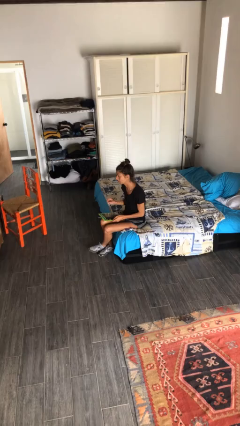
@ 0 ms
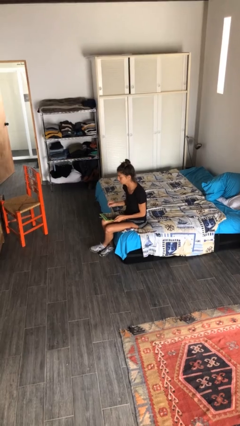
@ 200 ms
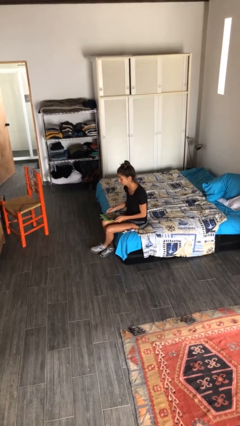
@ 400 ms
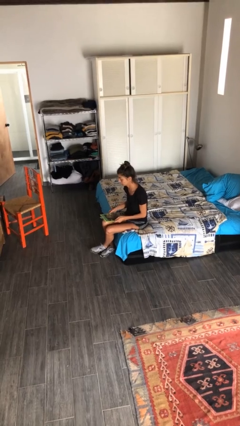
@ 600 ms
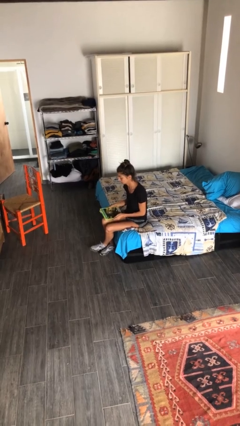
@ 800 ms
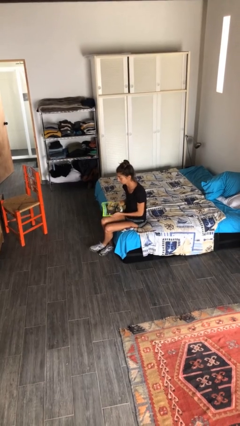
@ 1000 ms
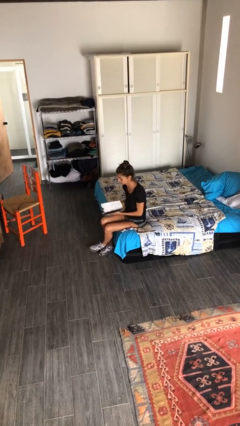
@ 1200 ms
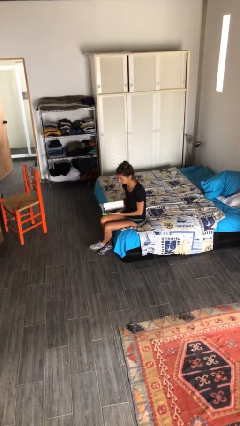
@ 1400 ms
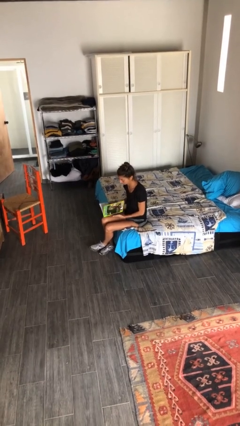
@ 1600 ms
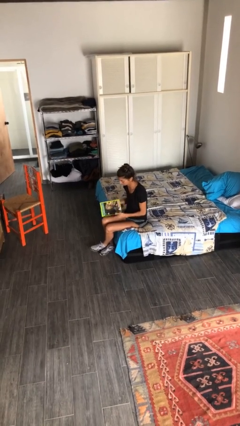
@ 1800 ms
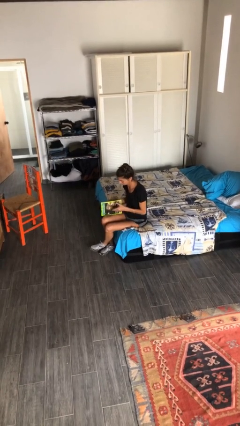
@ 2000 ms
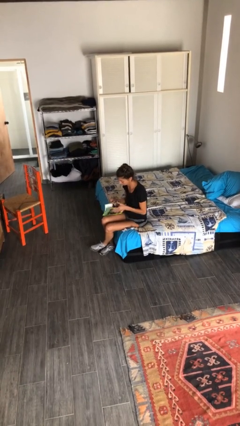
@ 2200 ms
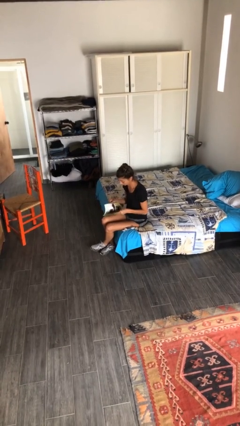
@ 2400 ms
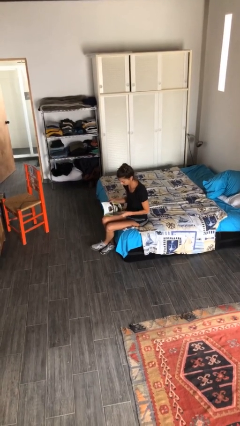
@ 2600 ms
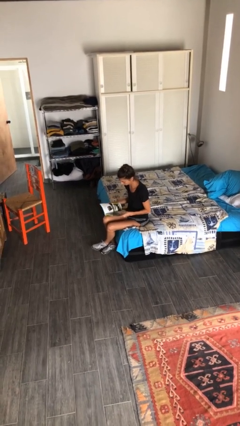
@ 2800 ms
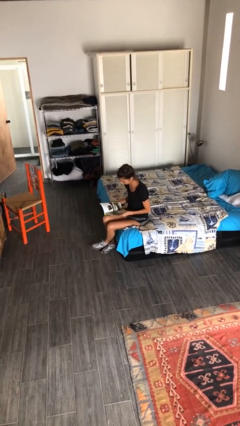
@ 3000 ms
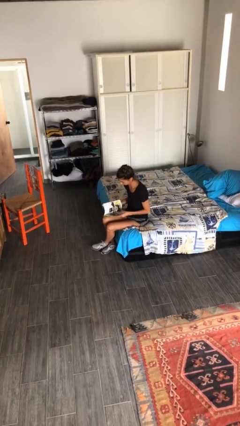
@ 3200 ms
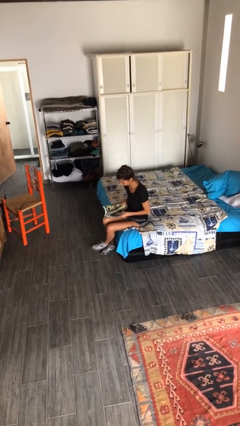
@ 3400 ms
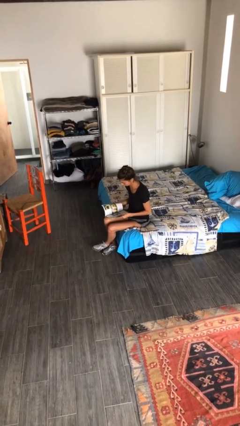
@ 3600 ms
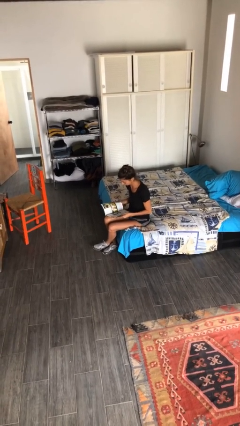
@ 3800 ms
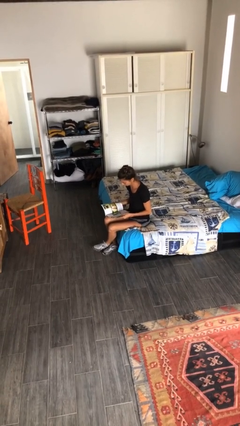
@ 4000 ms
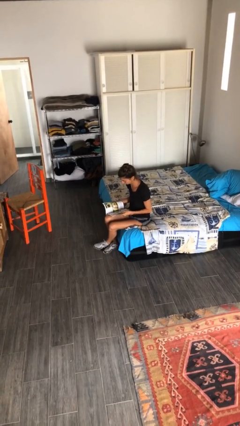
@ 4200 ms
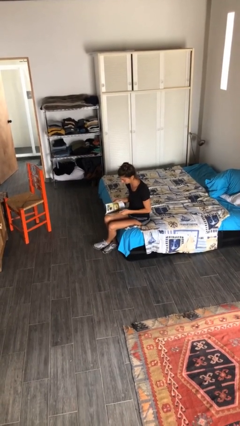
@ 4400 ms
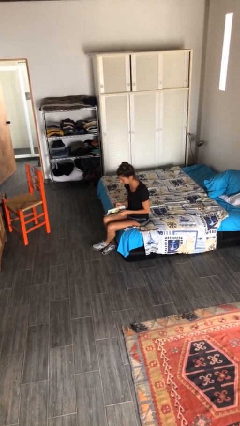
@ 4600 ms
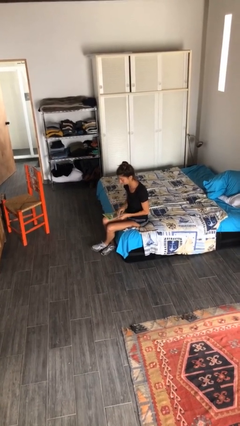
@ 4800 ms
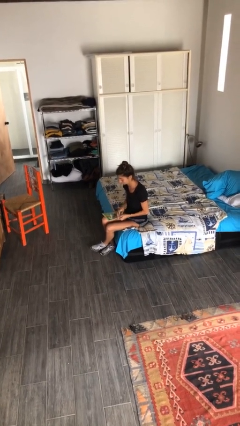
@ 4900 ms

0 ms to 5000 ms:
person reads magazine

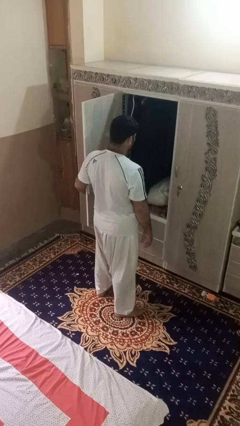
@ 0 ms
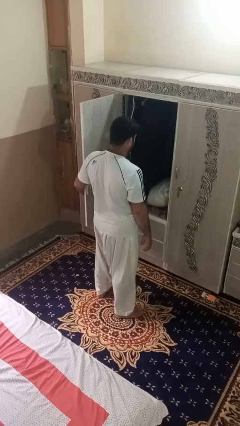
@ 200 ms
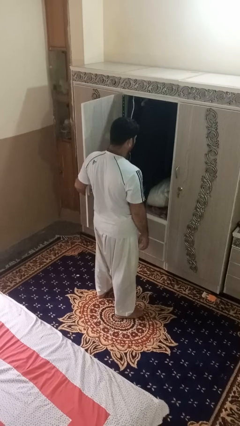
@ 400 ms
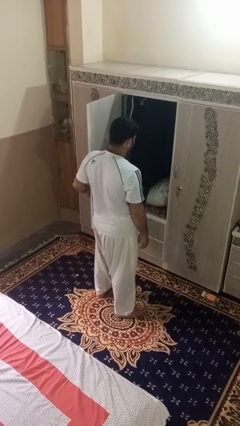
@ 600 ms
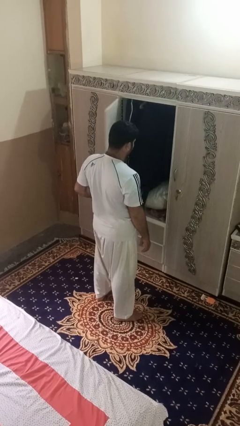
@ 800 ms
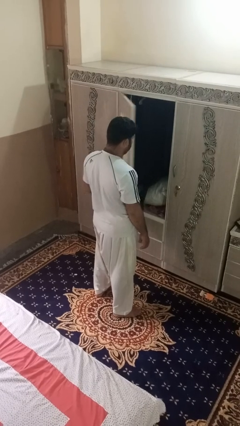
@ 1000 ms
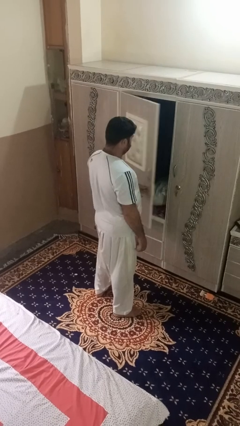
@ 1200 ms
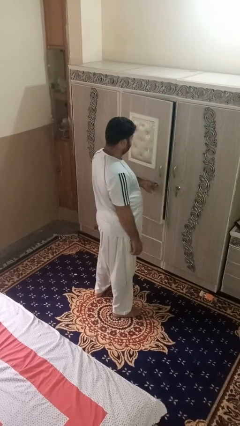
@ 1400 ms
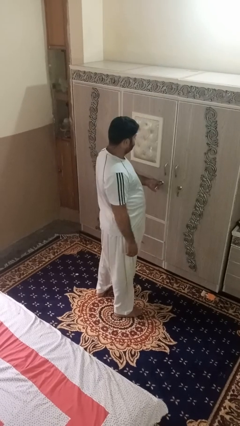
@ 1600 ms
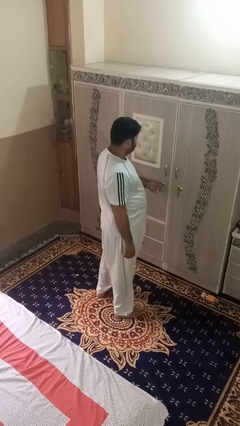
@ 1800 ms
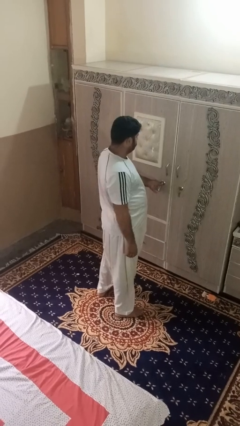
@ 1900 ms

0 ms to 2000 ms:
person closes dresser drawer

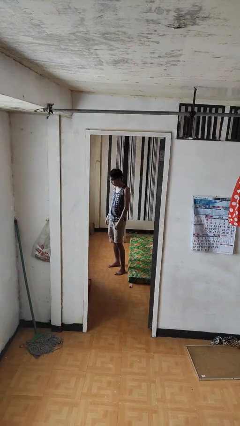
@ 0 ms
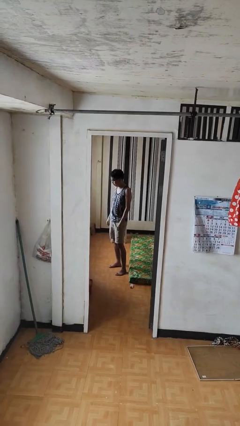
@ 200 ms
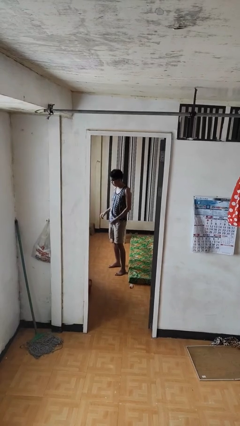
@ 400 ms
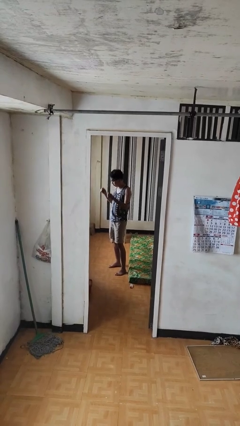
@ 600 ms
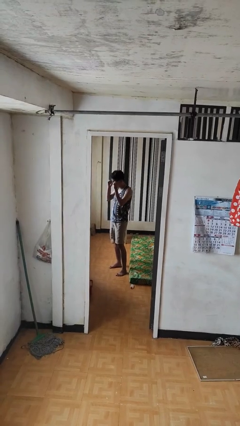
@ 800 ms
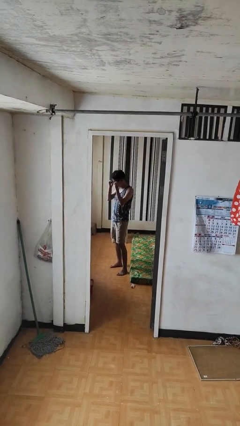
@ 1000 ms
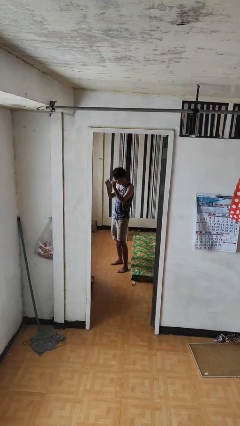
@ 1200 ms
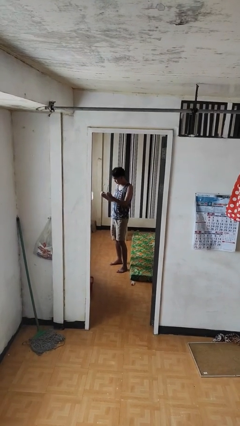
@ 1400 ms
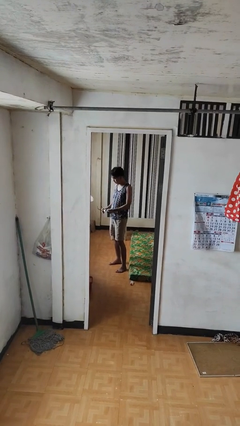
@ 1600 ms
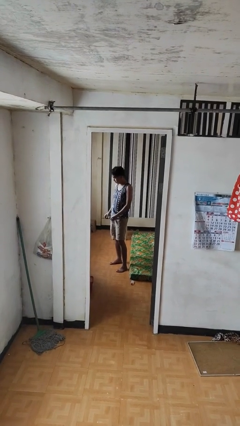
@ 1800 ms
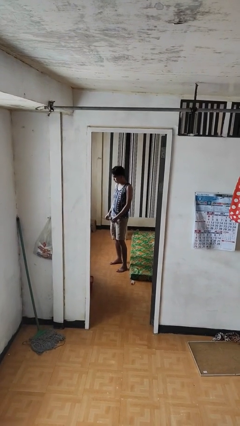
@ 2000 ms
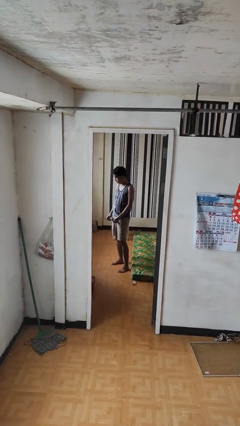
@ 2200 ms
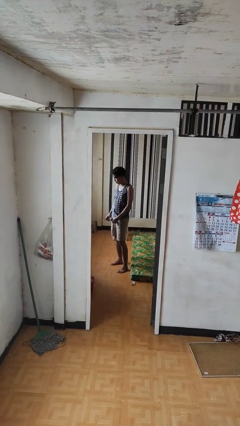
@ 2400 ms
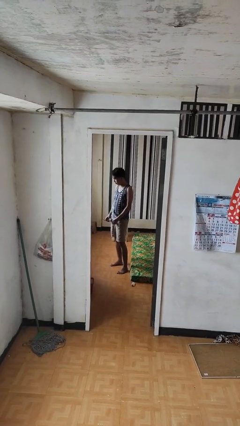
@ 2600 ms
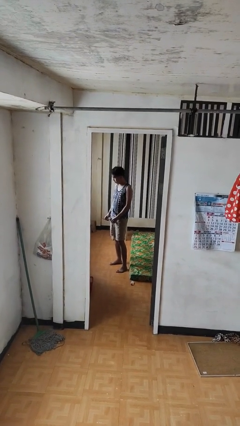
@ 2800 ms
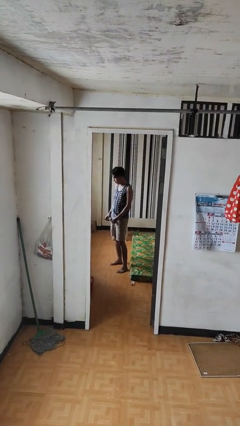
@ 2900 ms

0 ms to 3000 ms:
person takes off glasses

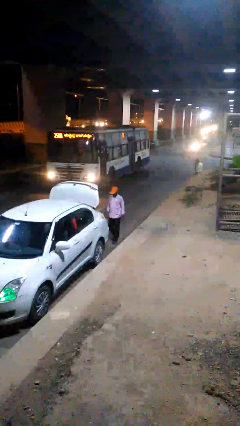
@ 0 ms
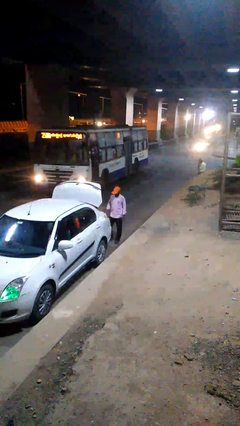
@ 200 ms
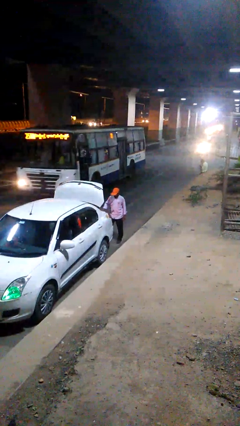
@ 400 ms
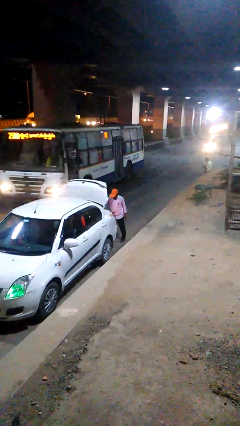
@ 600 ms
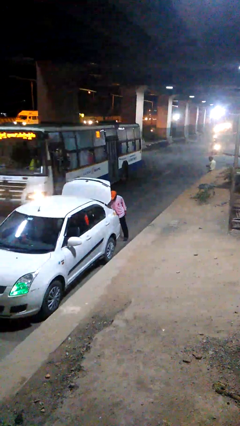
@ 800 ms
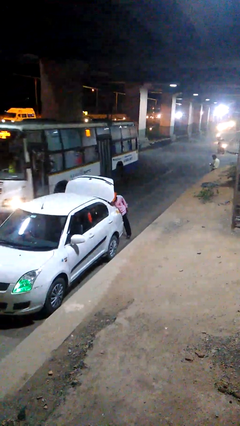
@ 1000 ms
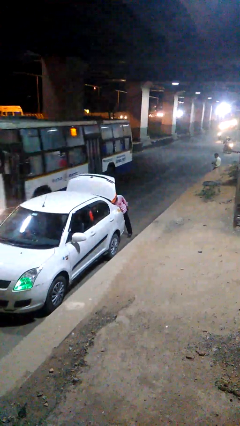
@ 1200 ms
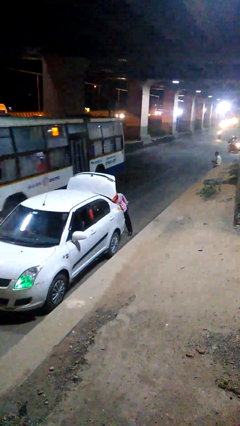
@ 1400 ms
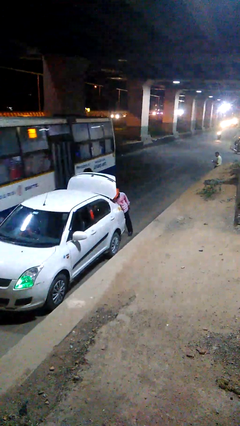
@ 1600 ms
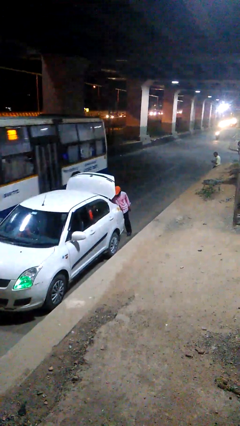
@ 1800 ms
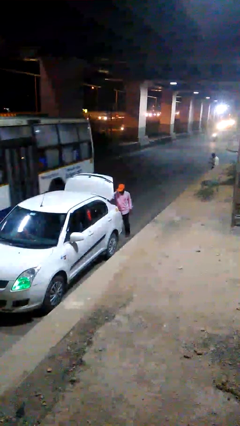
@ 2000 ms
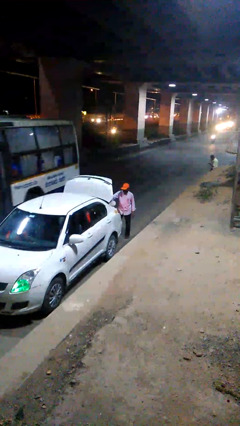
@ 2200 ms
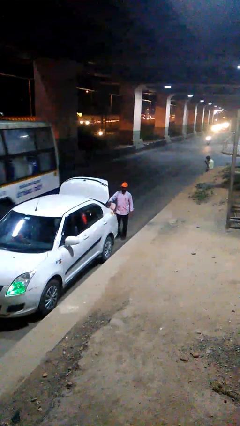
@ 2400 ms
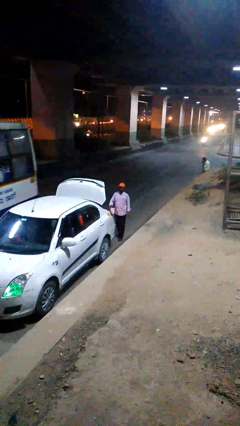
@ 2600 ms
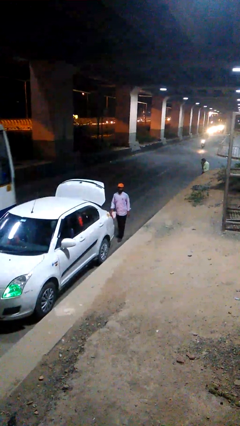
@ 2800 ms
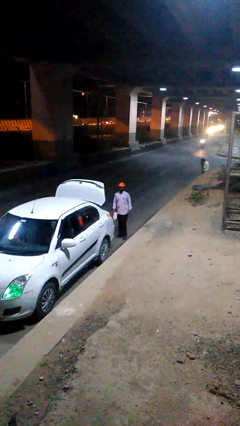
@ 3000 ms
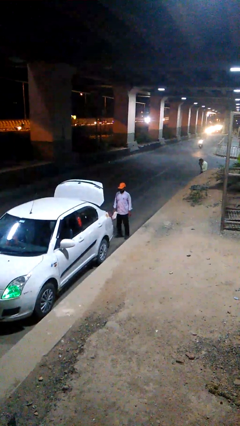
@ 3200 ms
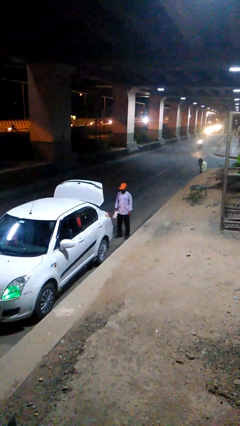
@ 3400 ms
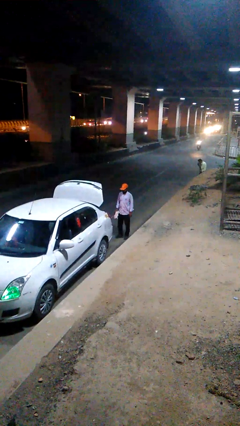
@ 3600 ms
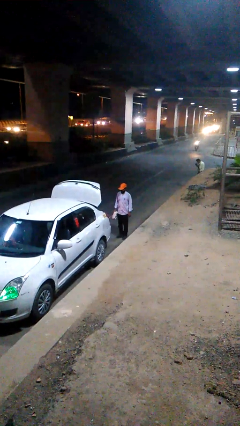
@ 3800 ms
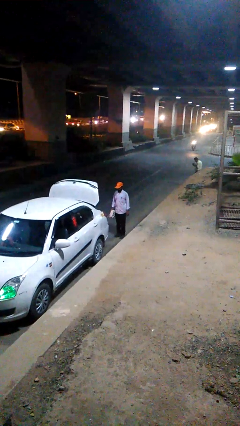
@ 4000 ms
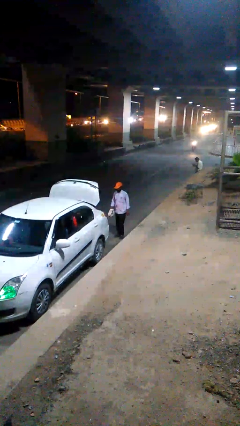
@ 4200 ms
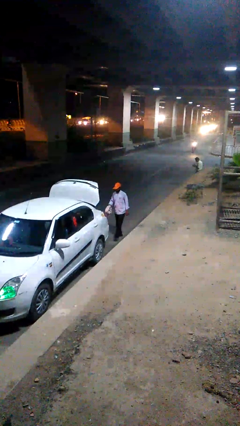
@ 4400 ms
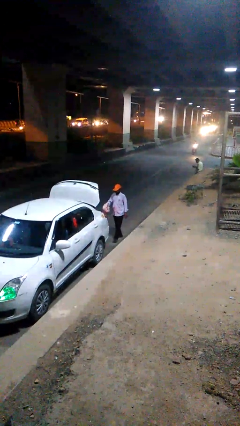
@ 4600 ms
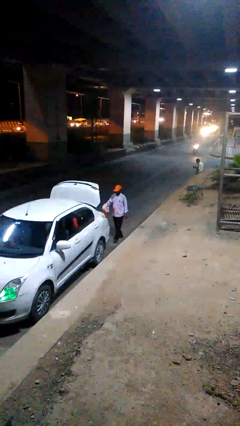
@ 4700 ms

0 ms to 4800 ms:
person unloads car

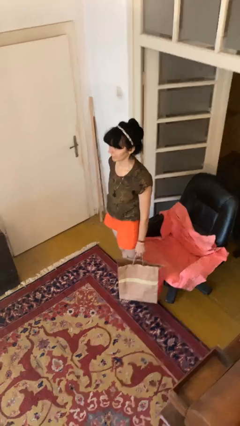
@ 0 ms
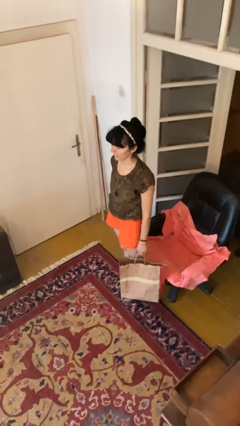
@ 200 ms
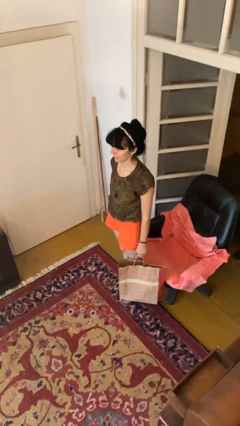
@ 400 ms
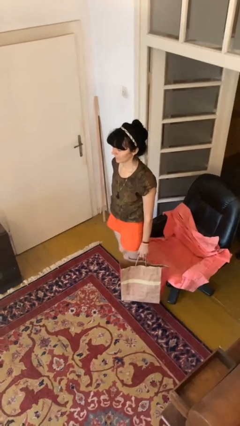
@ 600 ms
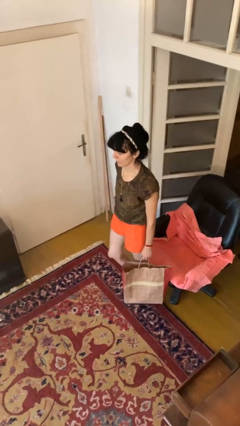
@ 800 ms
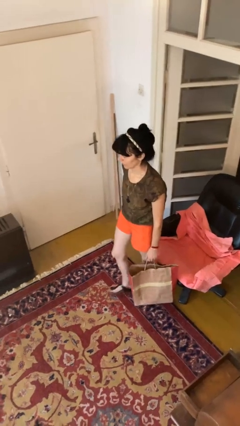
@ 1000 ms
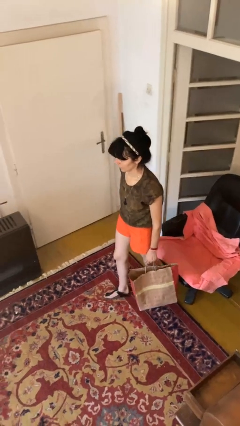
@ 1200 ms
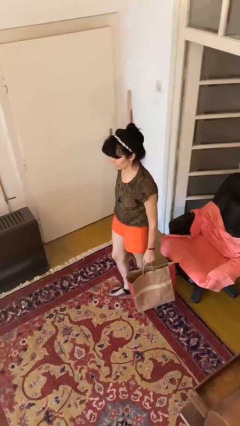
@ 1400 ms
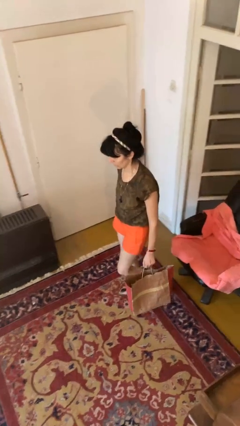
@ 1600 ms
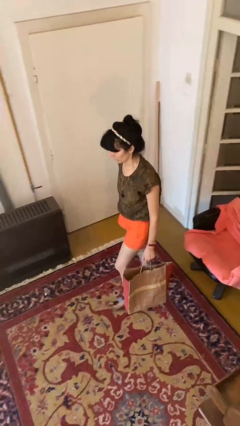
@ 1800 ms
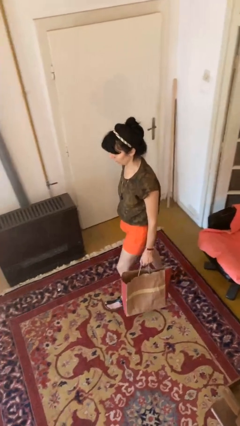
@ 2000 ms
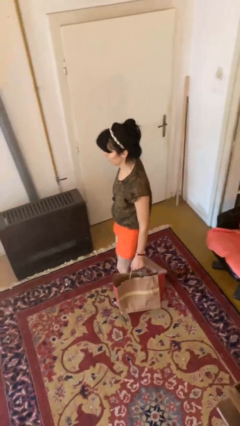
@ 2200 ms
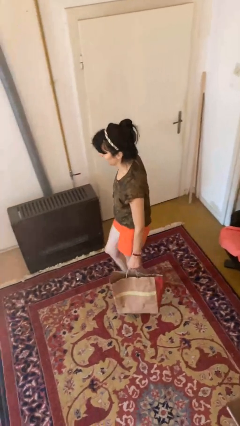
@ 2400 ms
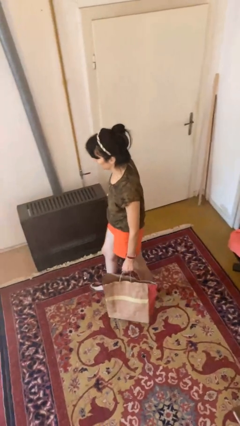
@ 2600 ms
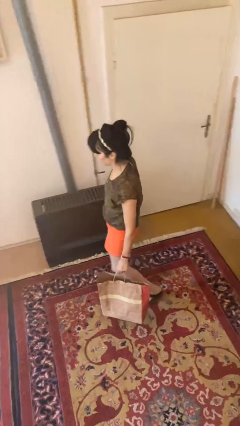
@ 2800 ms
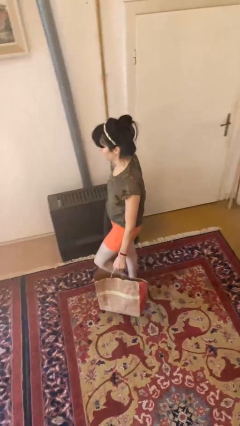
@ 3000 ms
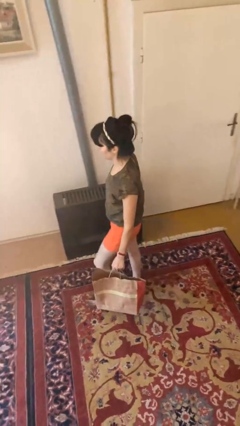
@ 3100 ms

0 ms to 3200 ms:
person carries groceries
